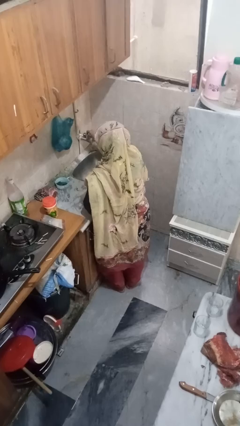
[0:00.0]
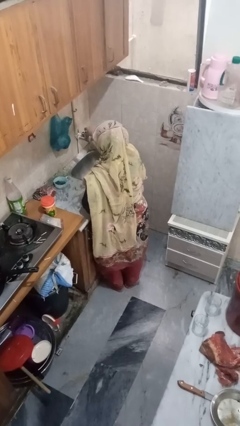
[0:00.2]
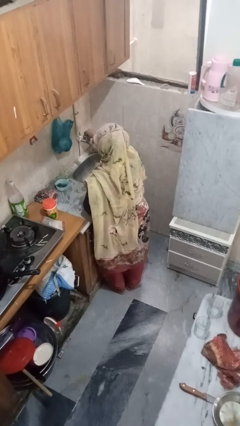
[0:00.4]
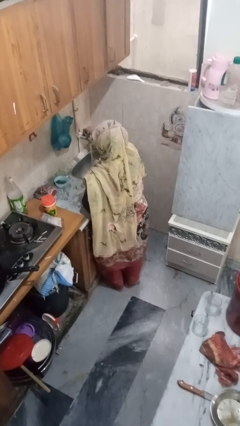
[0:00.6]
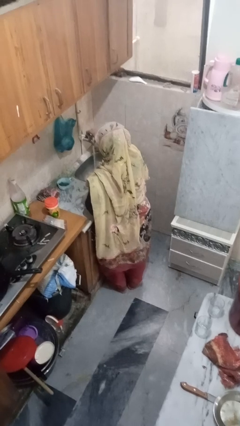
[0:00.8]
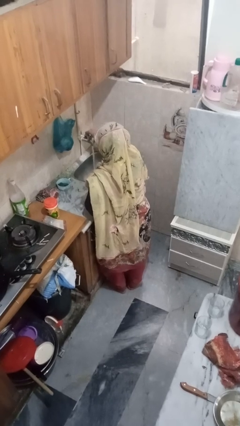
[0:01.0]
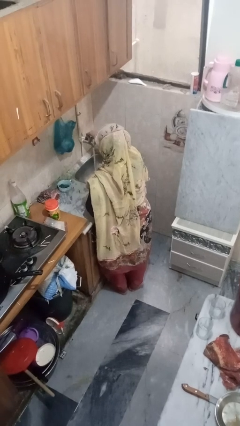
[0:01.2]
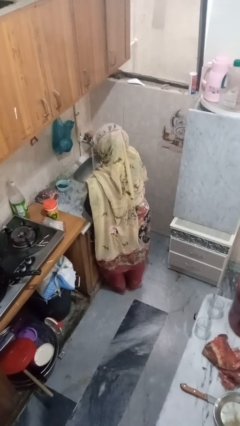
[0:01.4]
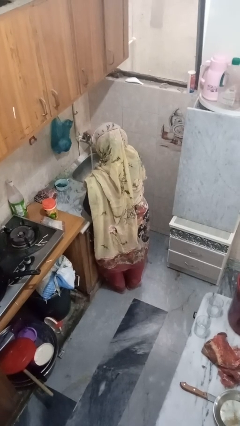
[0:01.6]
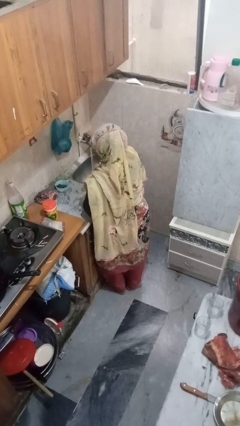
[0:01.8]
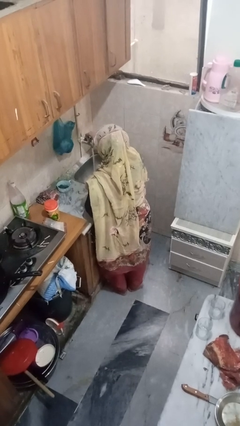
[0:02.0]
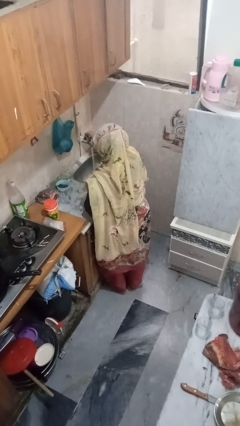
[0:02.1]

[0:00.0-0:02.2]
person turns on faucet

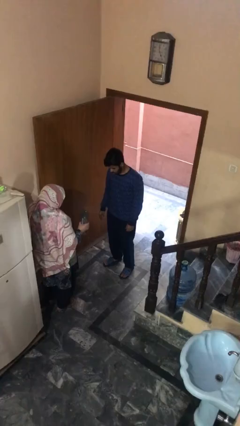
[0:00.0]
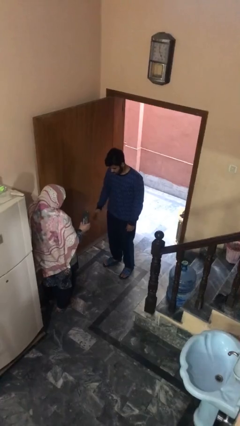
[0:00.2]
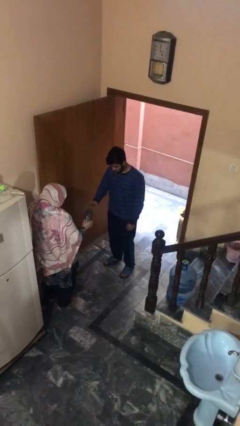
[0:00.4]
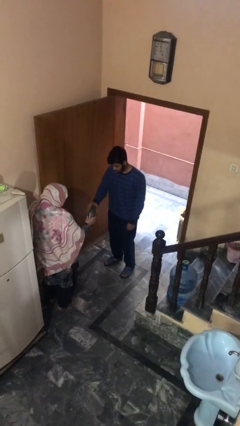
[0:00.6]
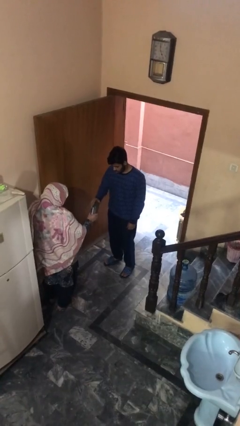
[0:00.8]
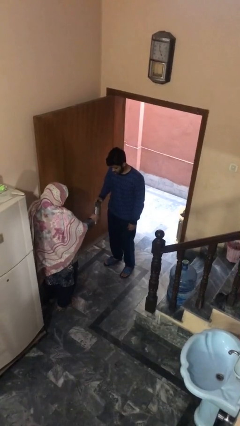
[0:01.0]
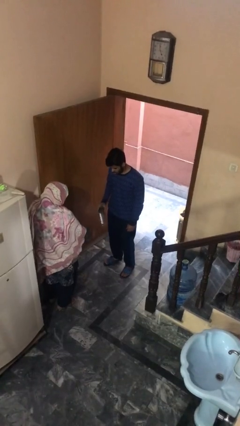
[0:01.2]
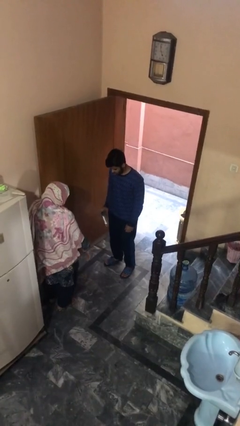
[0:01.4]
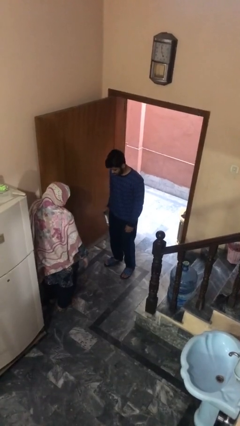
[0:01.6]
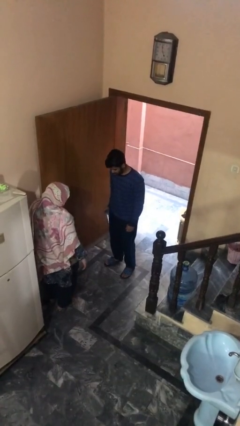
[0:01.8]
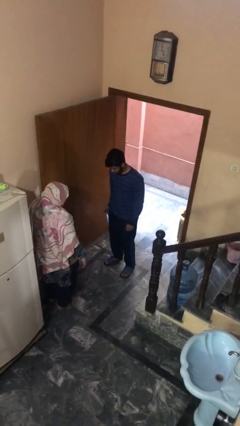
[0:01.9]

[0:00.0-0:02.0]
person transfers object to person

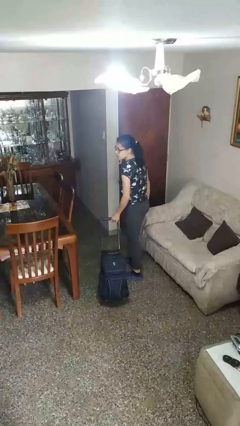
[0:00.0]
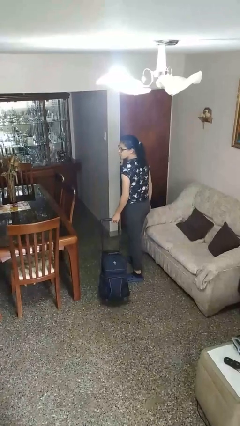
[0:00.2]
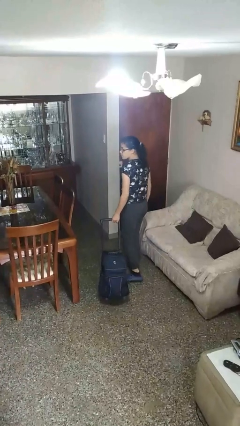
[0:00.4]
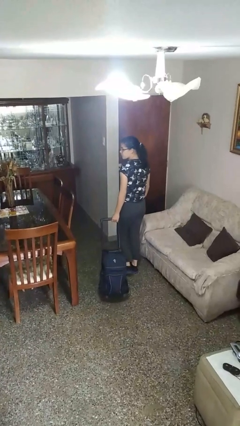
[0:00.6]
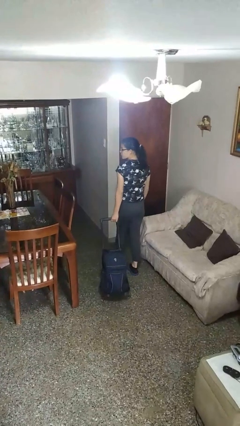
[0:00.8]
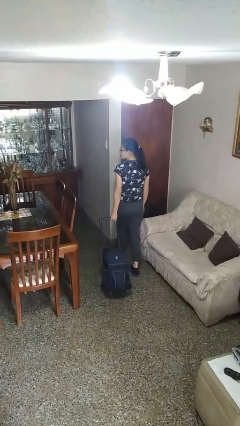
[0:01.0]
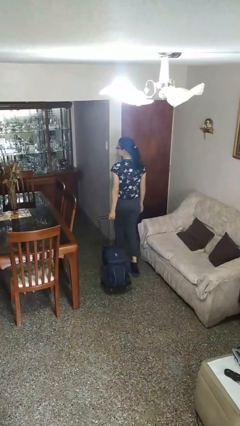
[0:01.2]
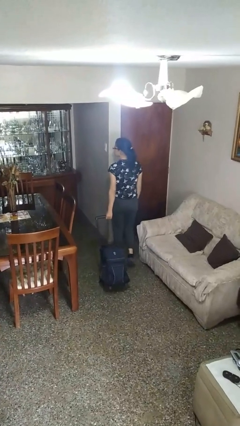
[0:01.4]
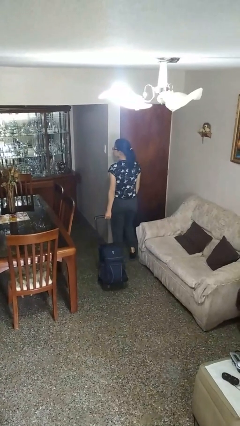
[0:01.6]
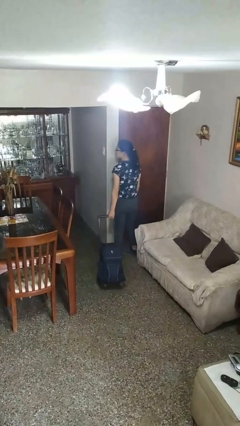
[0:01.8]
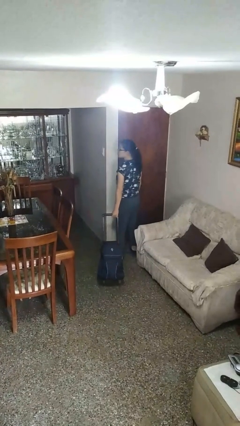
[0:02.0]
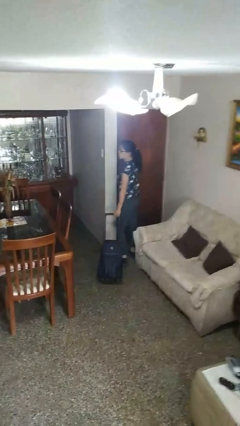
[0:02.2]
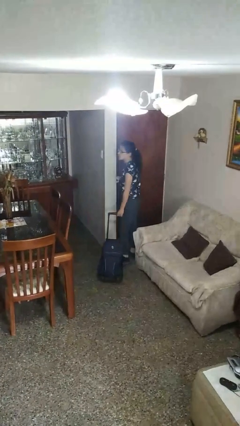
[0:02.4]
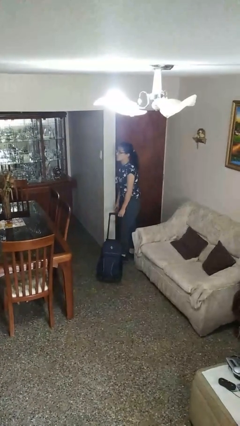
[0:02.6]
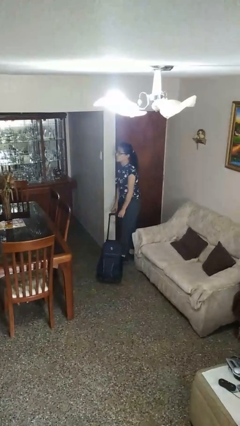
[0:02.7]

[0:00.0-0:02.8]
person pulls wheeled cart

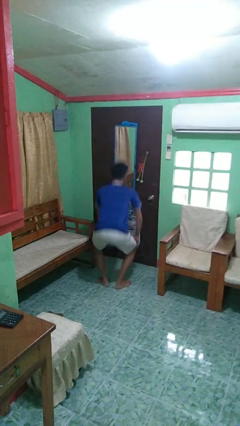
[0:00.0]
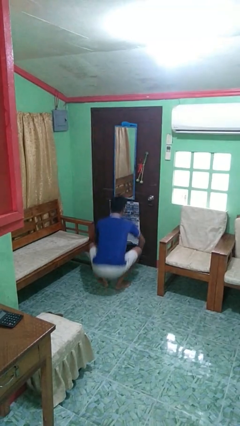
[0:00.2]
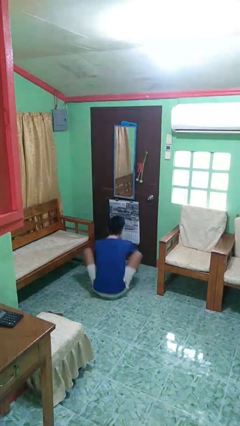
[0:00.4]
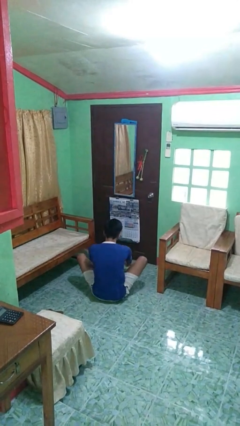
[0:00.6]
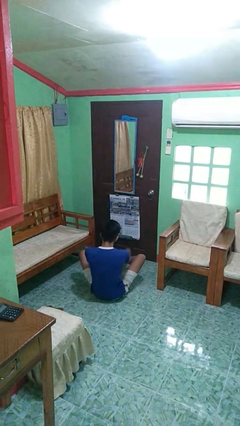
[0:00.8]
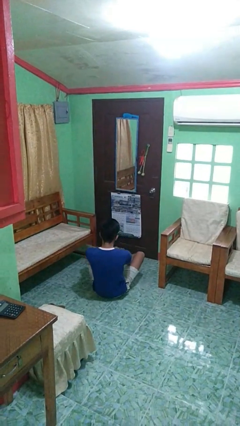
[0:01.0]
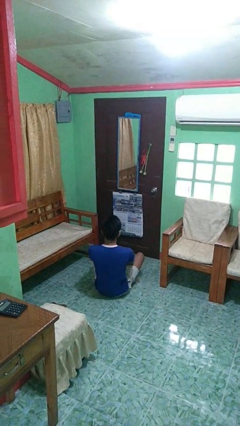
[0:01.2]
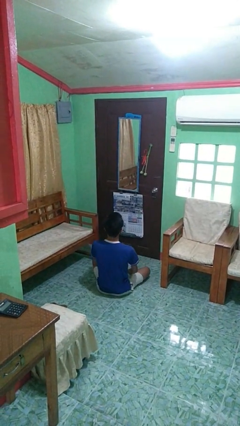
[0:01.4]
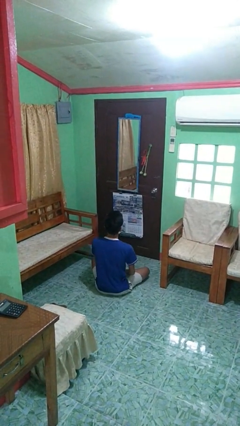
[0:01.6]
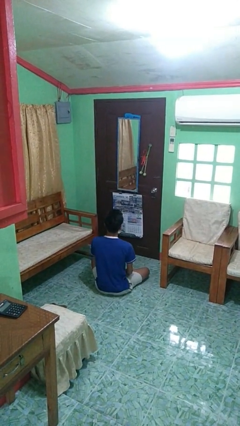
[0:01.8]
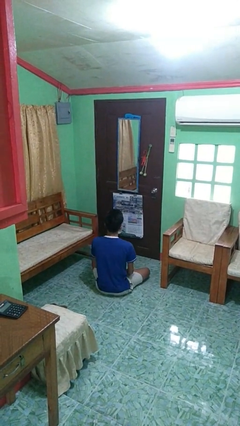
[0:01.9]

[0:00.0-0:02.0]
person squats

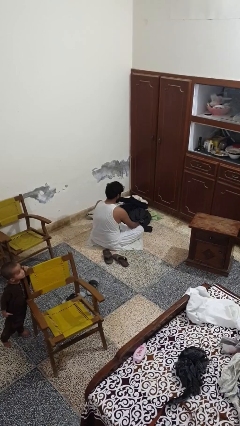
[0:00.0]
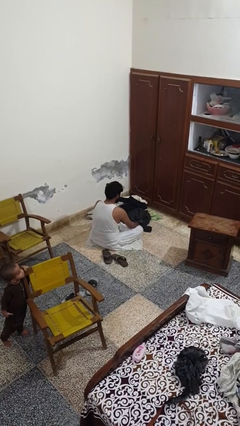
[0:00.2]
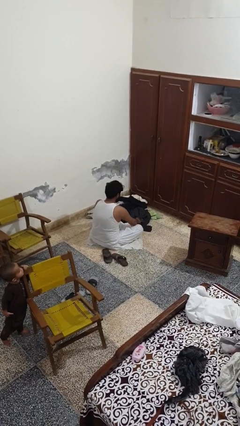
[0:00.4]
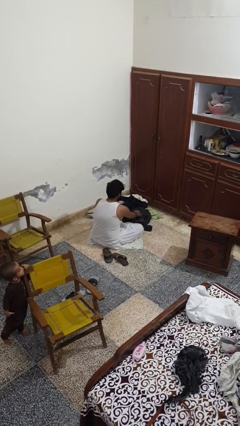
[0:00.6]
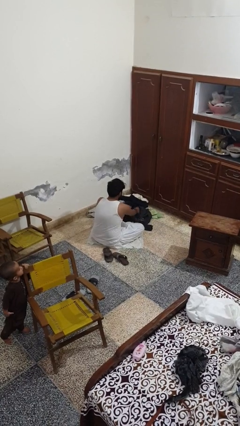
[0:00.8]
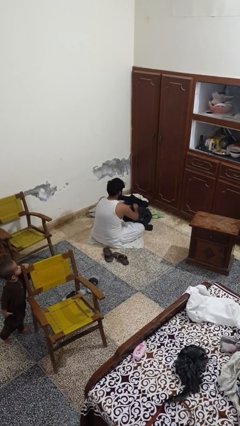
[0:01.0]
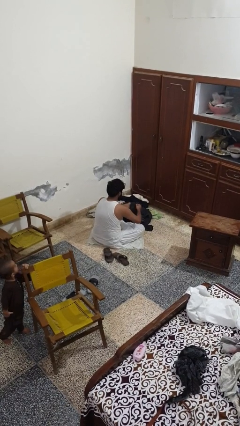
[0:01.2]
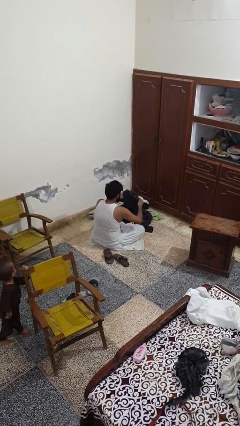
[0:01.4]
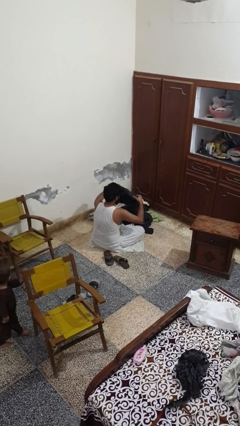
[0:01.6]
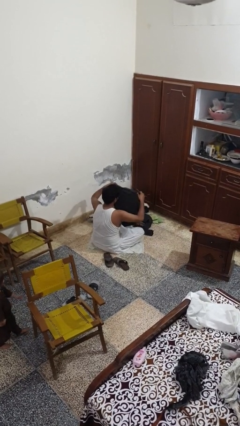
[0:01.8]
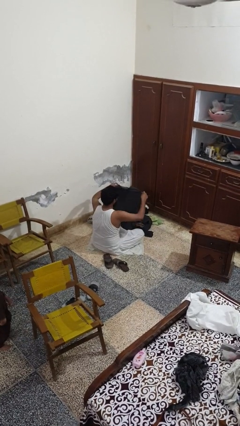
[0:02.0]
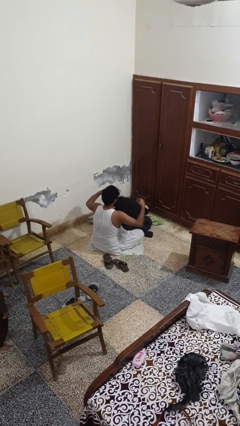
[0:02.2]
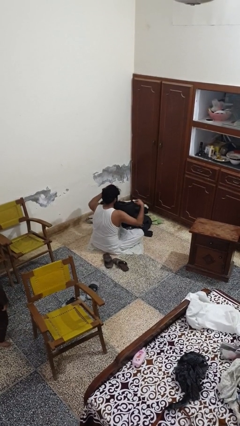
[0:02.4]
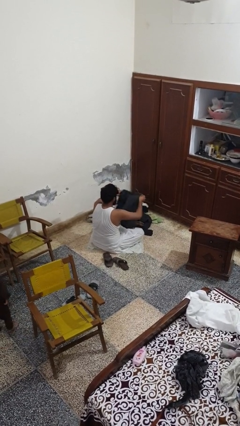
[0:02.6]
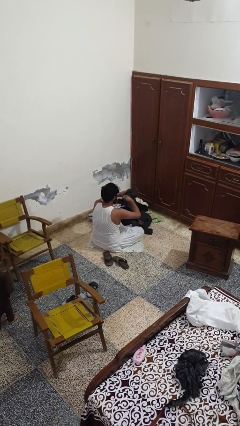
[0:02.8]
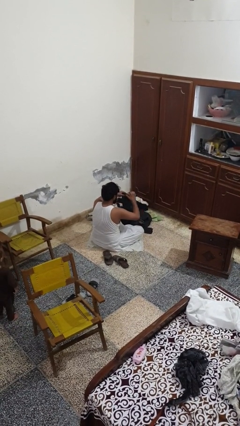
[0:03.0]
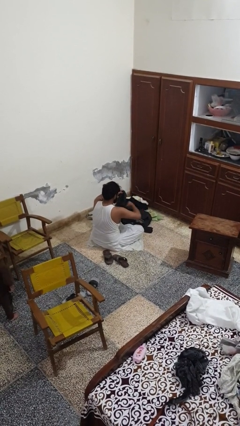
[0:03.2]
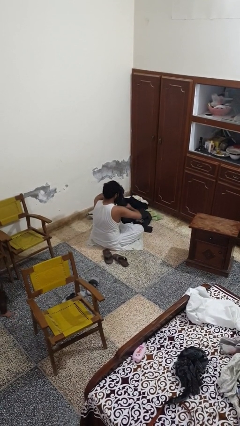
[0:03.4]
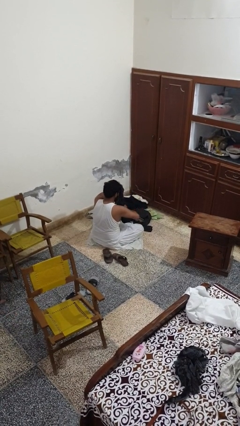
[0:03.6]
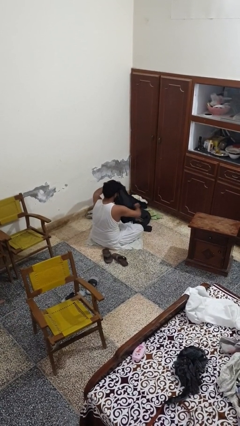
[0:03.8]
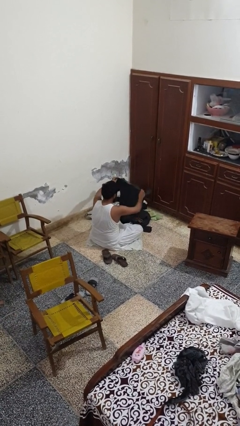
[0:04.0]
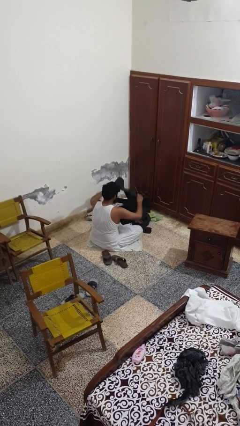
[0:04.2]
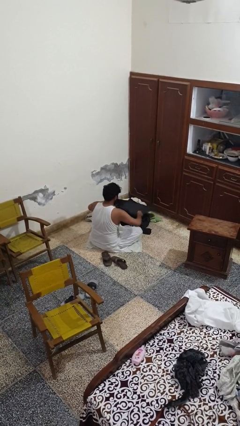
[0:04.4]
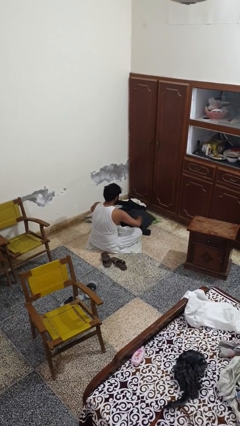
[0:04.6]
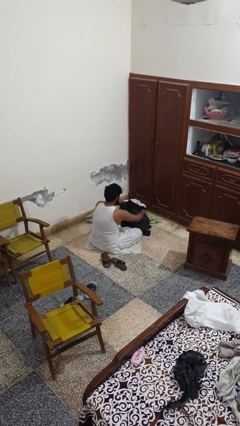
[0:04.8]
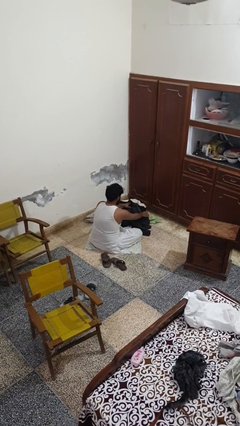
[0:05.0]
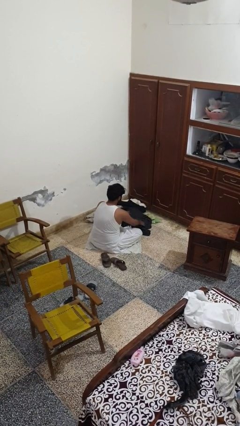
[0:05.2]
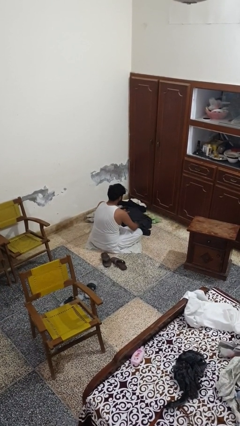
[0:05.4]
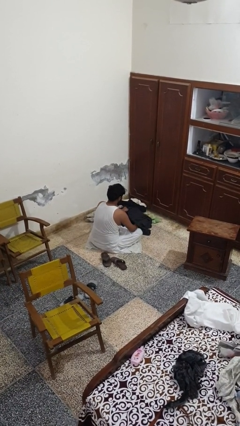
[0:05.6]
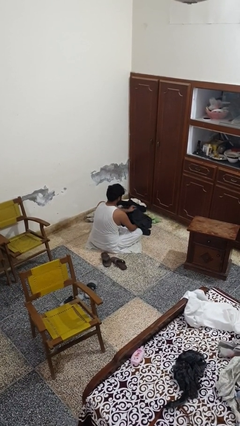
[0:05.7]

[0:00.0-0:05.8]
person folds shirt

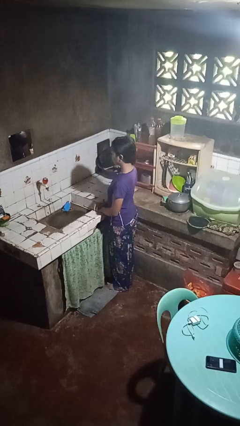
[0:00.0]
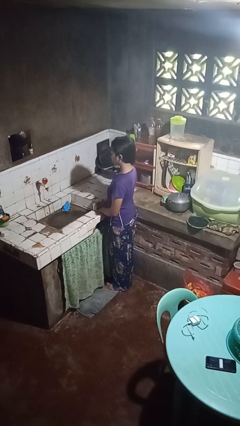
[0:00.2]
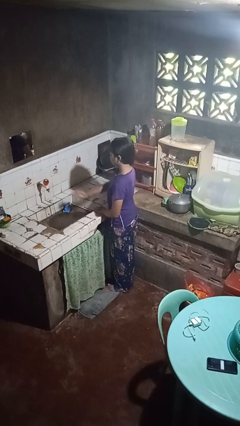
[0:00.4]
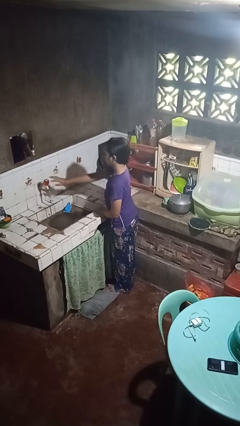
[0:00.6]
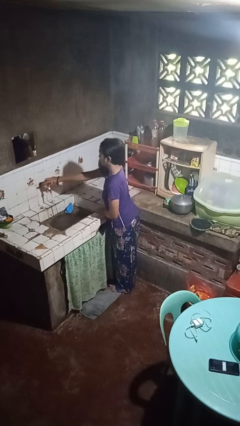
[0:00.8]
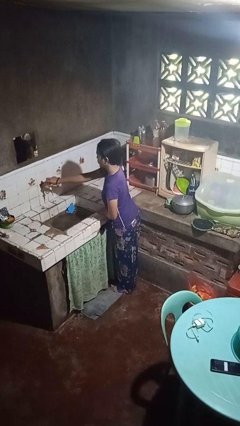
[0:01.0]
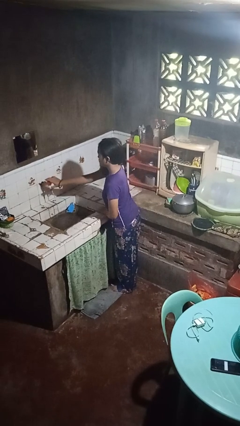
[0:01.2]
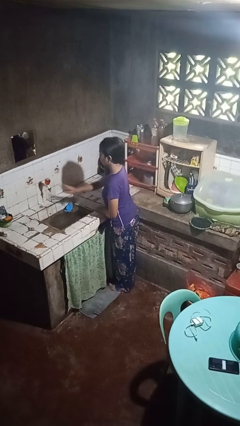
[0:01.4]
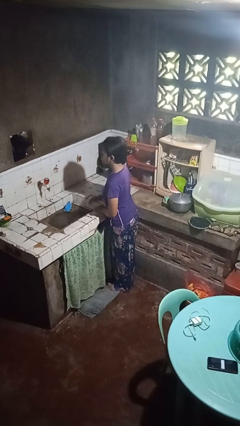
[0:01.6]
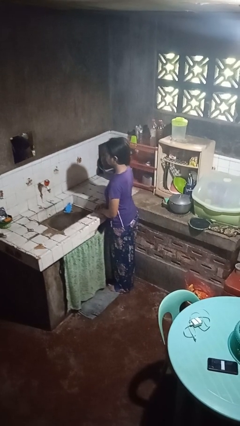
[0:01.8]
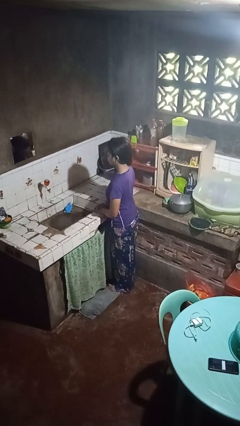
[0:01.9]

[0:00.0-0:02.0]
person turns off faucet

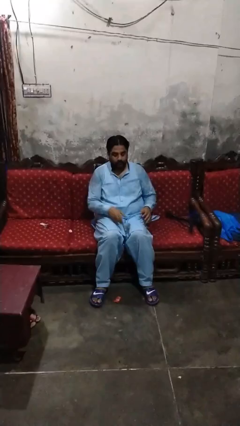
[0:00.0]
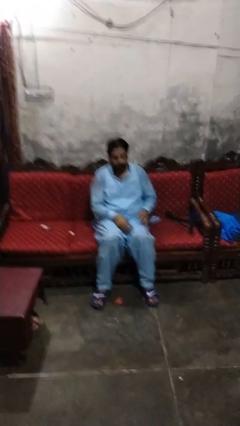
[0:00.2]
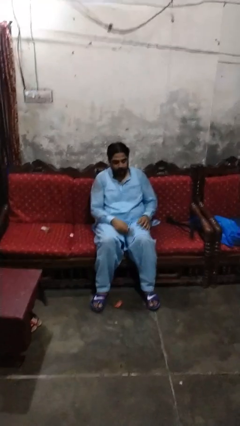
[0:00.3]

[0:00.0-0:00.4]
person applies facial moisturizer
